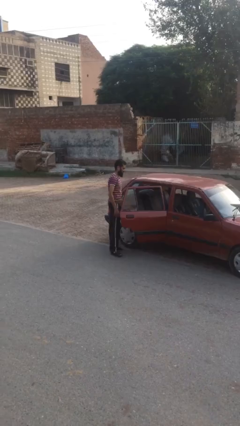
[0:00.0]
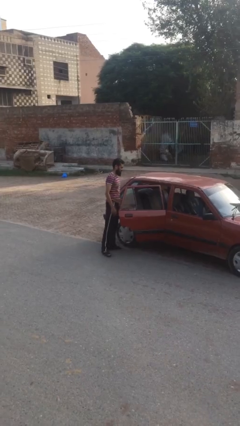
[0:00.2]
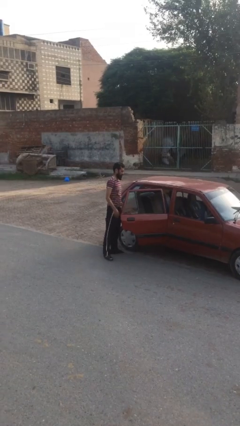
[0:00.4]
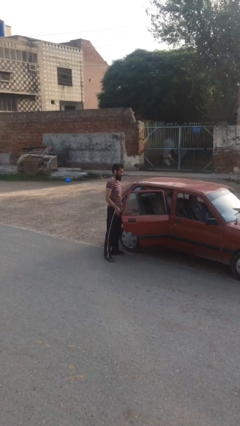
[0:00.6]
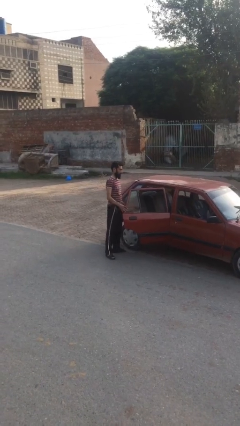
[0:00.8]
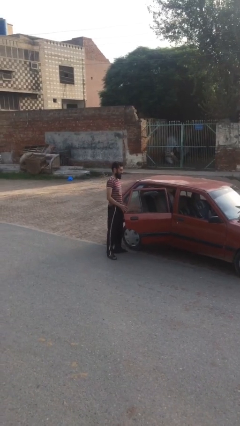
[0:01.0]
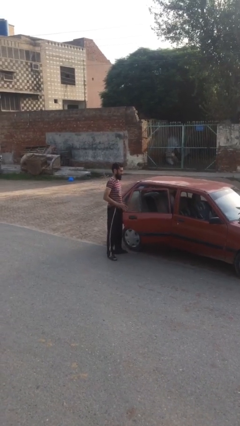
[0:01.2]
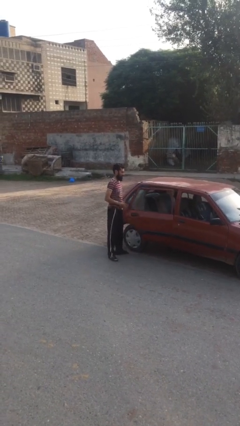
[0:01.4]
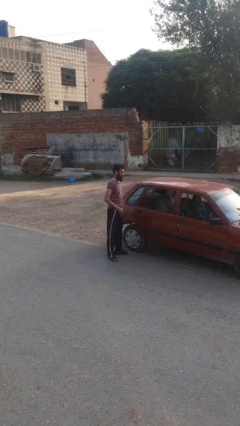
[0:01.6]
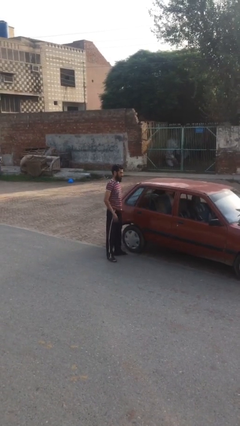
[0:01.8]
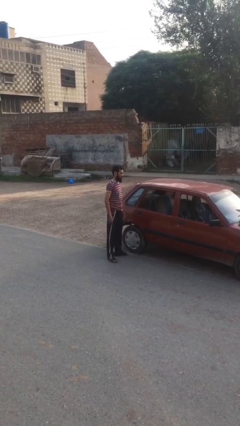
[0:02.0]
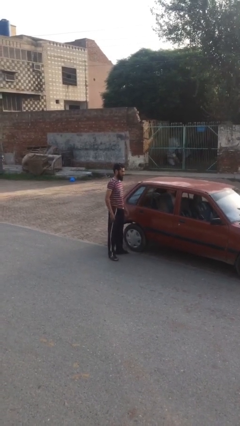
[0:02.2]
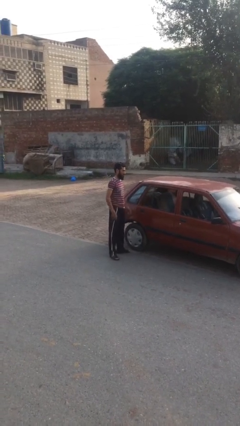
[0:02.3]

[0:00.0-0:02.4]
person closes car door

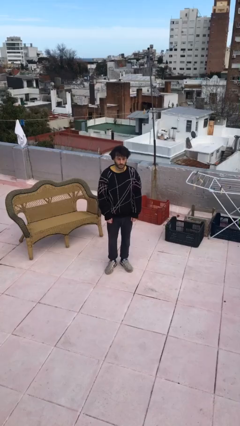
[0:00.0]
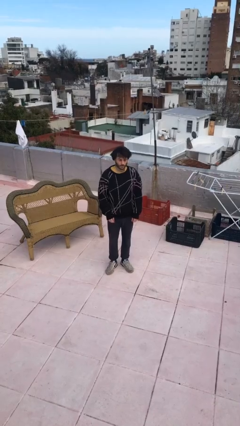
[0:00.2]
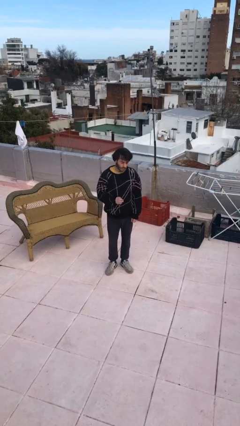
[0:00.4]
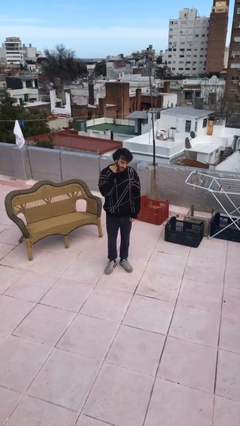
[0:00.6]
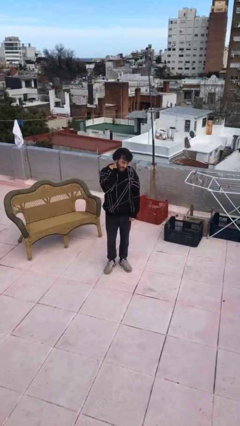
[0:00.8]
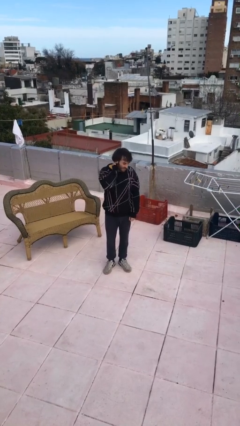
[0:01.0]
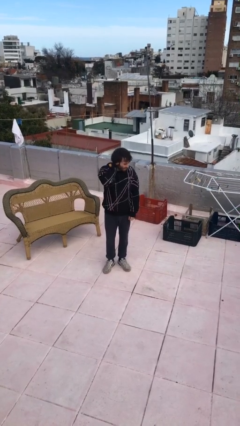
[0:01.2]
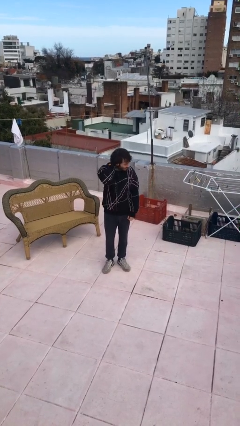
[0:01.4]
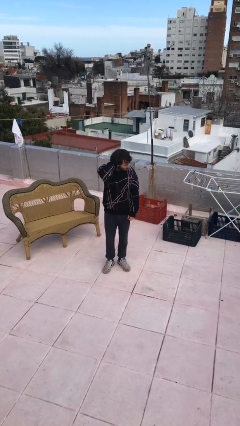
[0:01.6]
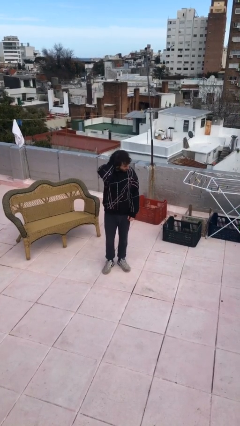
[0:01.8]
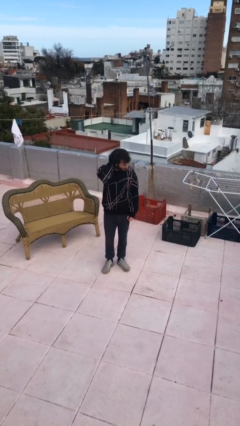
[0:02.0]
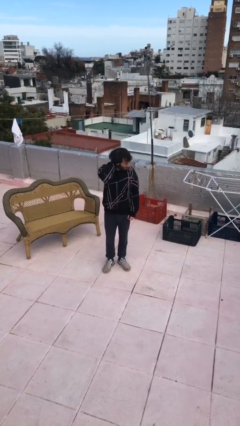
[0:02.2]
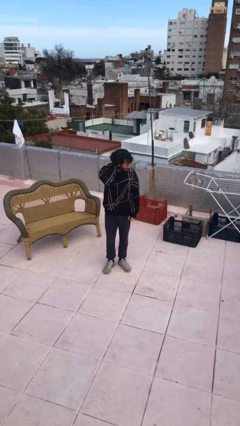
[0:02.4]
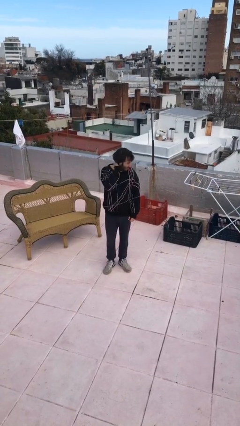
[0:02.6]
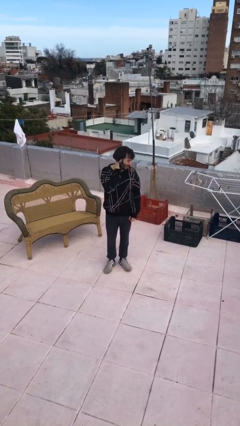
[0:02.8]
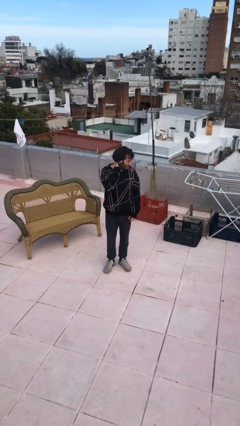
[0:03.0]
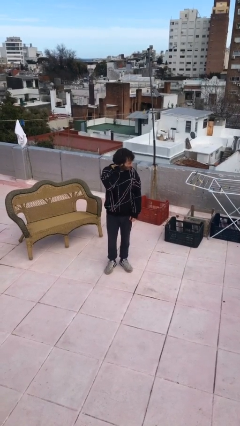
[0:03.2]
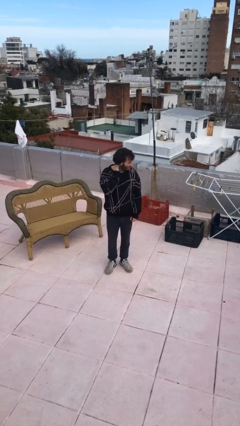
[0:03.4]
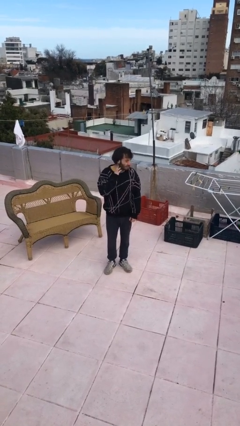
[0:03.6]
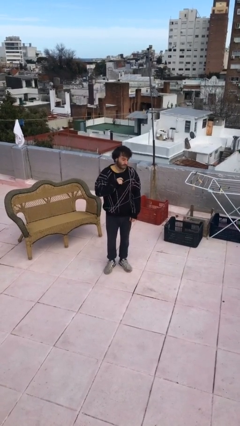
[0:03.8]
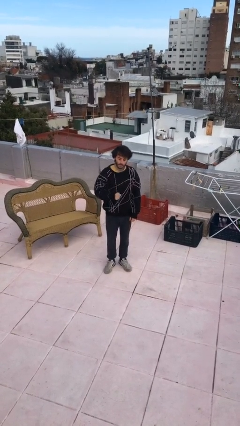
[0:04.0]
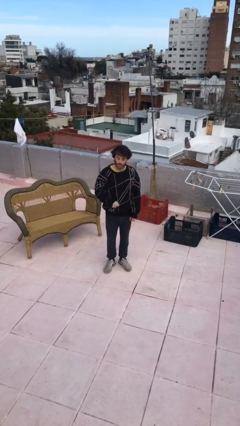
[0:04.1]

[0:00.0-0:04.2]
person scratches face

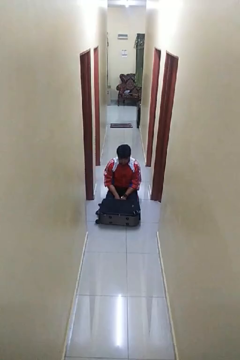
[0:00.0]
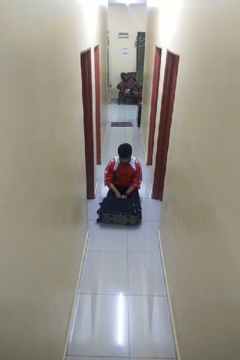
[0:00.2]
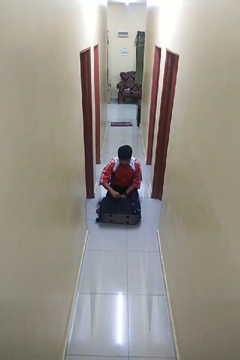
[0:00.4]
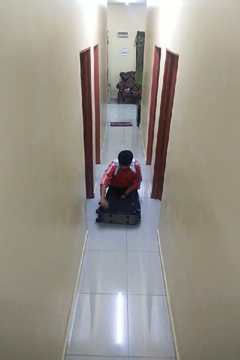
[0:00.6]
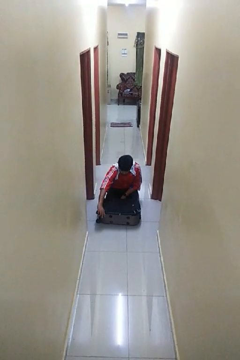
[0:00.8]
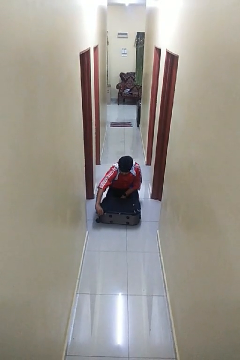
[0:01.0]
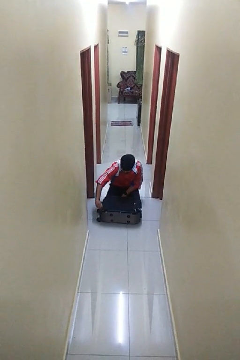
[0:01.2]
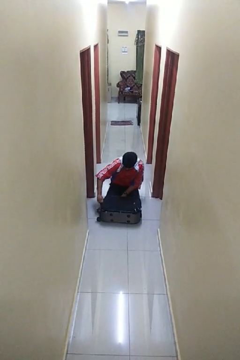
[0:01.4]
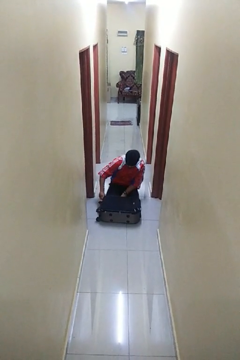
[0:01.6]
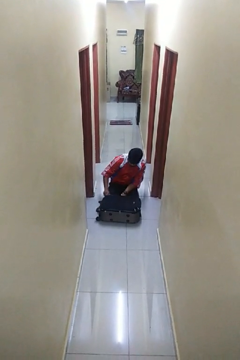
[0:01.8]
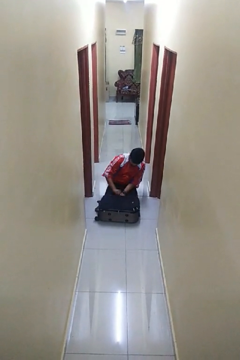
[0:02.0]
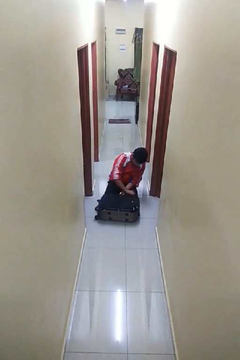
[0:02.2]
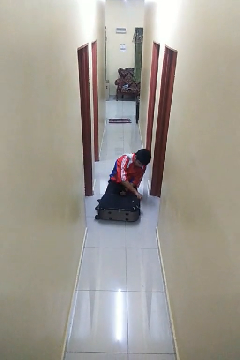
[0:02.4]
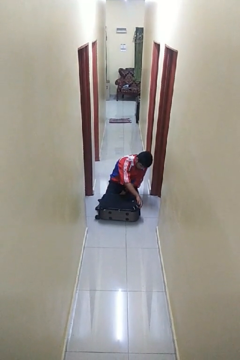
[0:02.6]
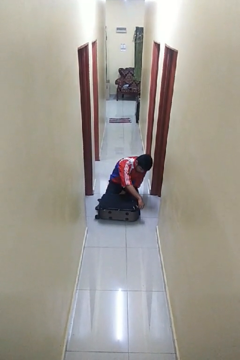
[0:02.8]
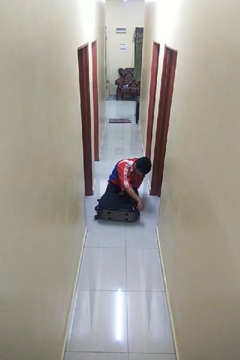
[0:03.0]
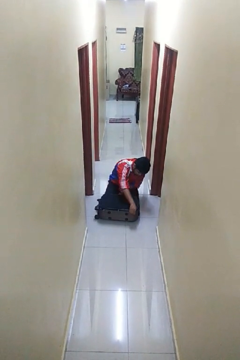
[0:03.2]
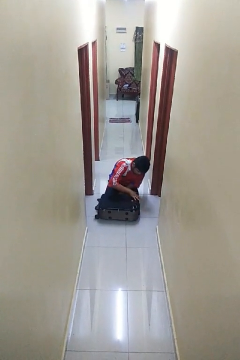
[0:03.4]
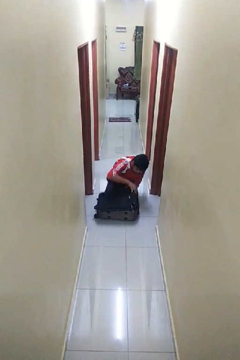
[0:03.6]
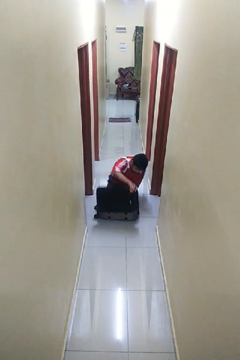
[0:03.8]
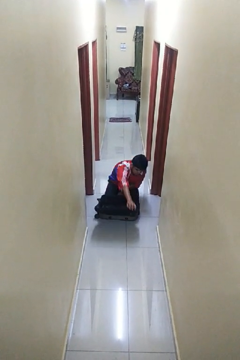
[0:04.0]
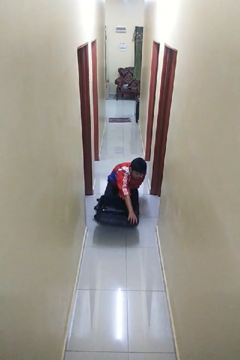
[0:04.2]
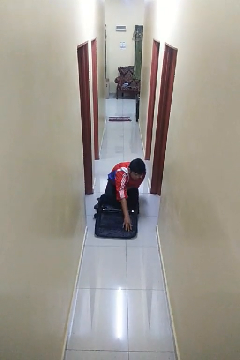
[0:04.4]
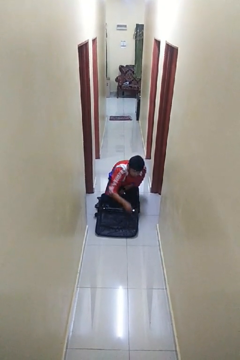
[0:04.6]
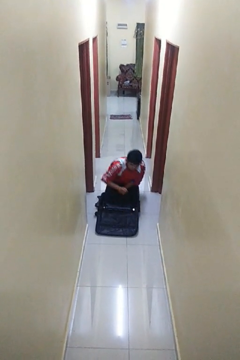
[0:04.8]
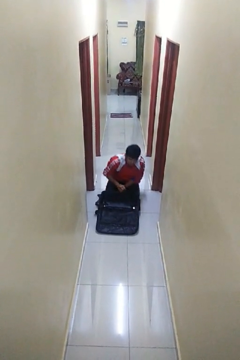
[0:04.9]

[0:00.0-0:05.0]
person opens suitcase

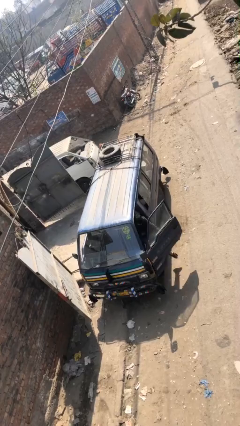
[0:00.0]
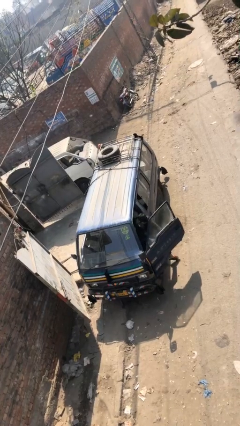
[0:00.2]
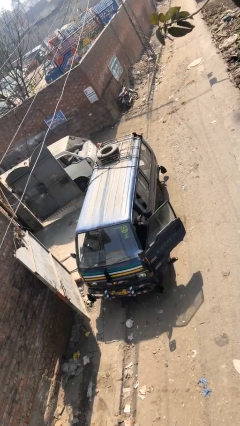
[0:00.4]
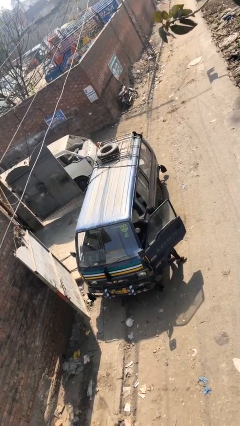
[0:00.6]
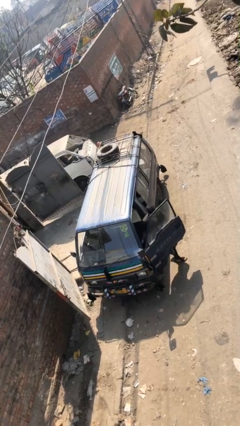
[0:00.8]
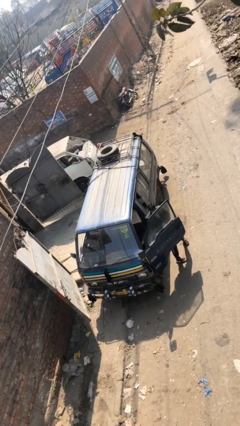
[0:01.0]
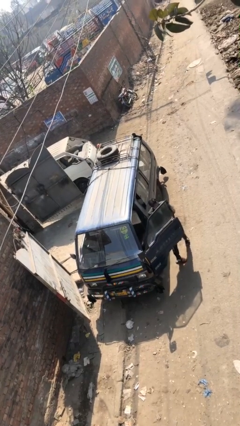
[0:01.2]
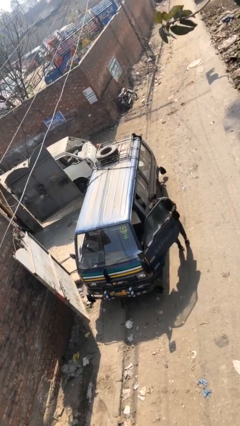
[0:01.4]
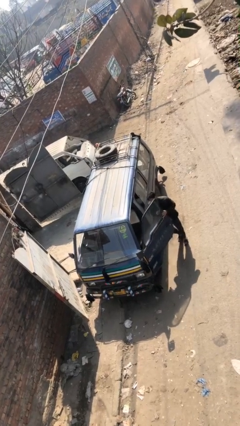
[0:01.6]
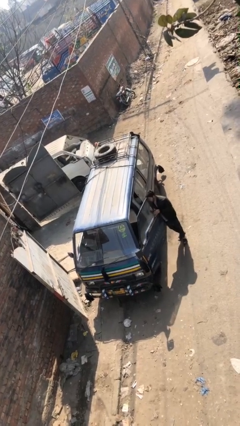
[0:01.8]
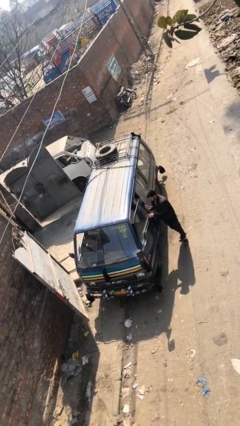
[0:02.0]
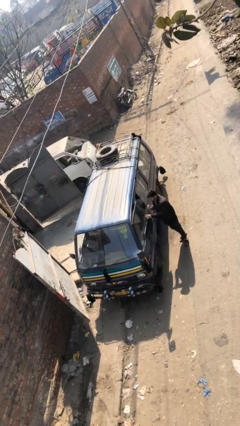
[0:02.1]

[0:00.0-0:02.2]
car drops off person

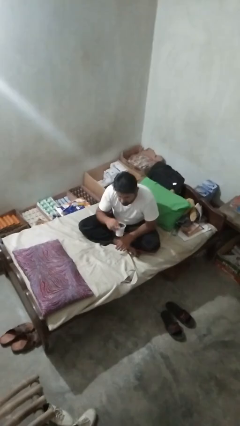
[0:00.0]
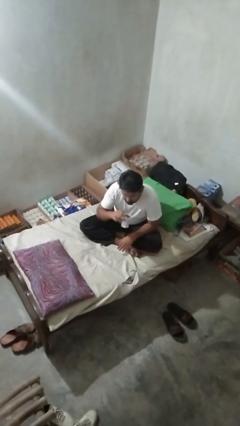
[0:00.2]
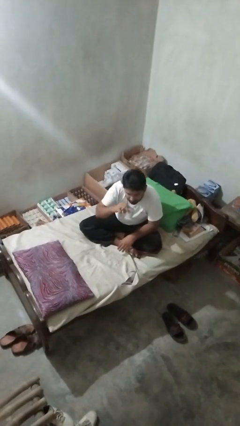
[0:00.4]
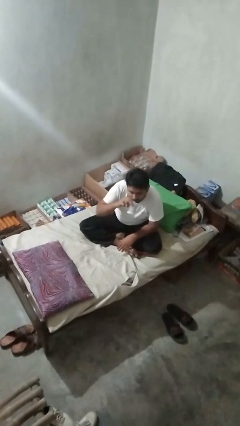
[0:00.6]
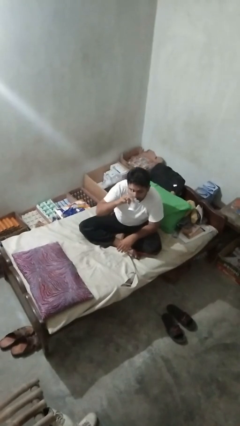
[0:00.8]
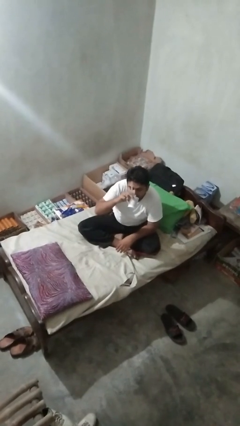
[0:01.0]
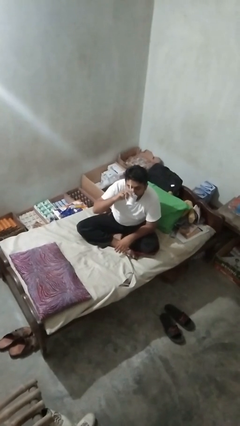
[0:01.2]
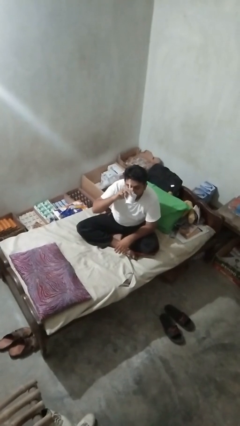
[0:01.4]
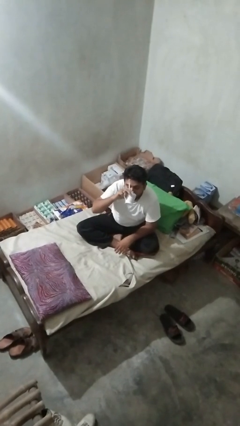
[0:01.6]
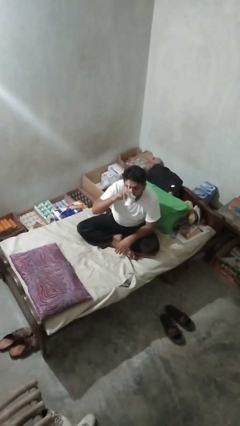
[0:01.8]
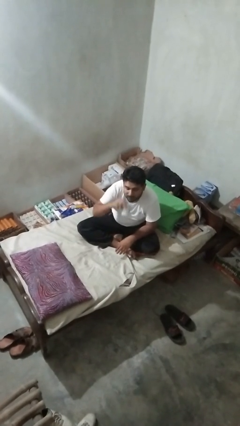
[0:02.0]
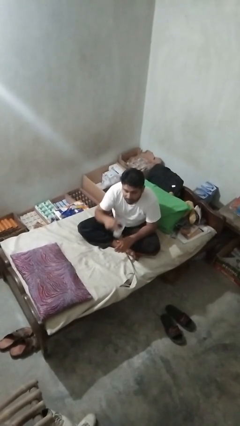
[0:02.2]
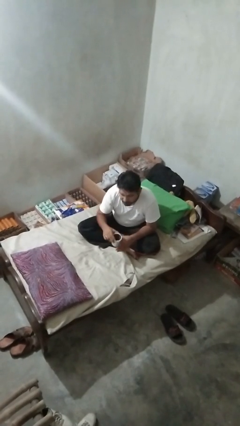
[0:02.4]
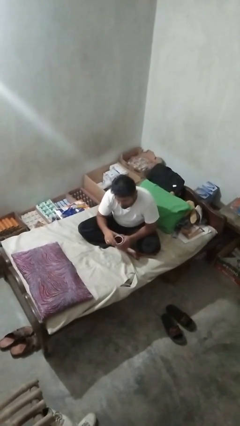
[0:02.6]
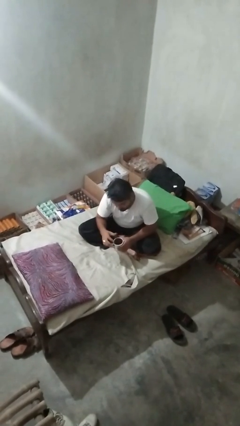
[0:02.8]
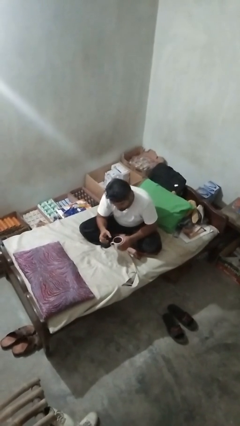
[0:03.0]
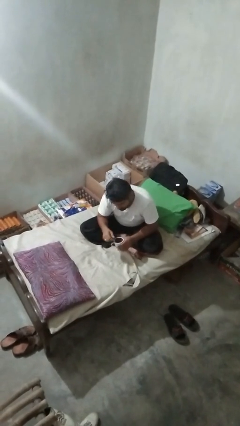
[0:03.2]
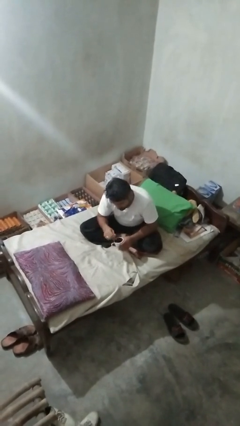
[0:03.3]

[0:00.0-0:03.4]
person drinks from mug

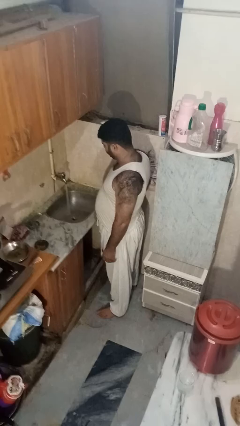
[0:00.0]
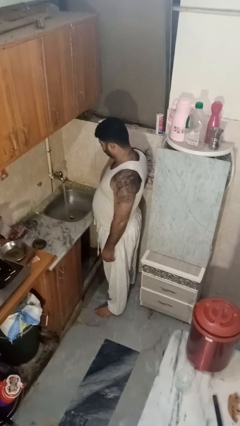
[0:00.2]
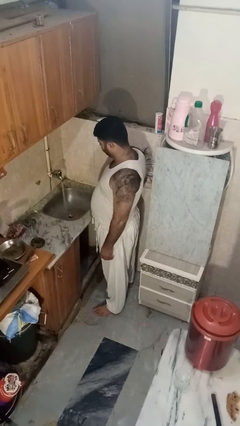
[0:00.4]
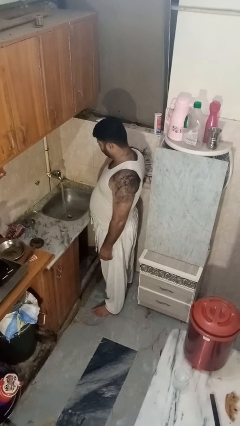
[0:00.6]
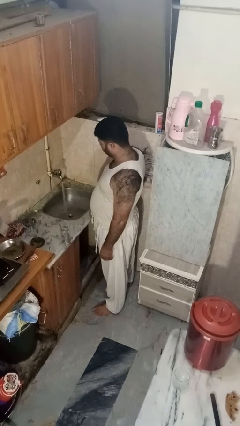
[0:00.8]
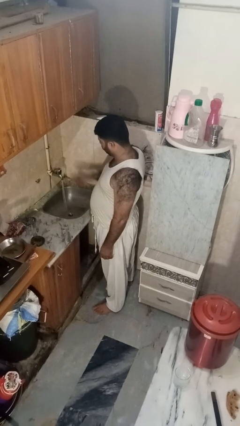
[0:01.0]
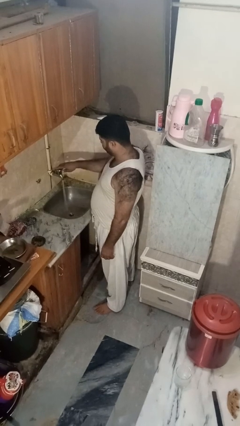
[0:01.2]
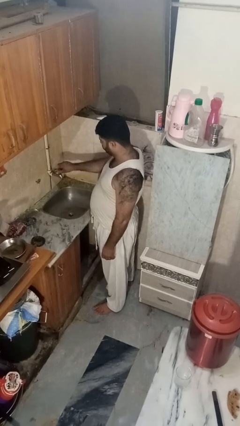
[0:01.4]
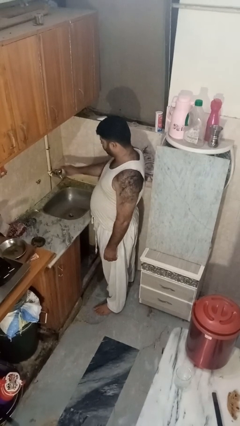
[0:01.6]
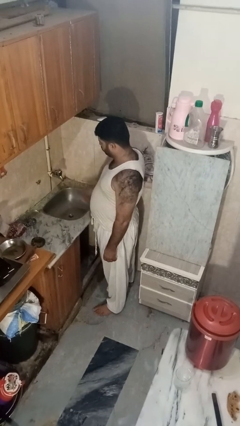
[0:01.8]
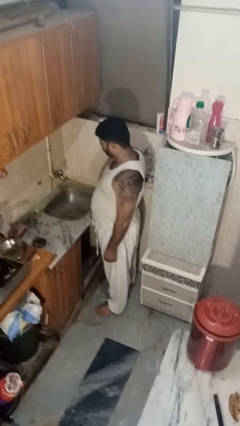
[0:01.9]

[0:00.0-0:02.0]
person turns off faucet
